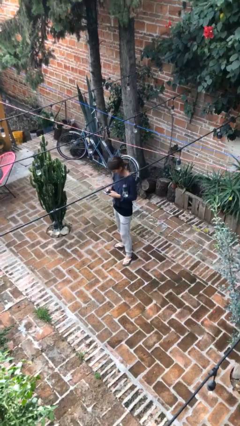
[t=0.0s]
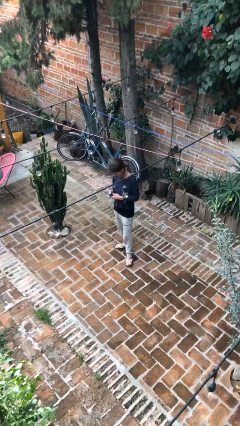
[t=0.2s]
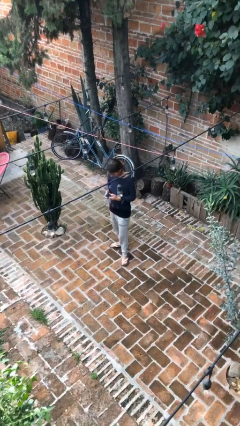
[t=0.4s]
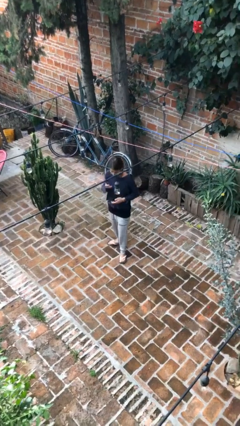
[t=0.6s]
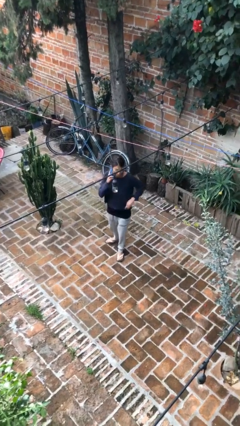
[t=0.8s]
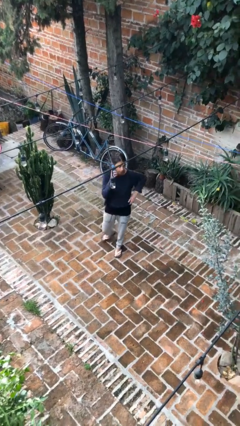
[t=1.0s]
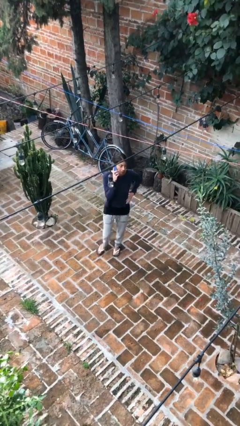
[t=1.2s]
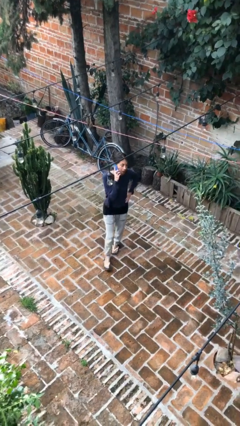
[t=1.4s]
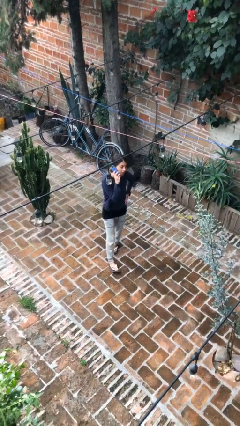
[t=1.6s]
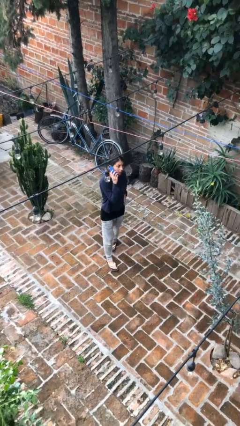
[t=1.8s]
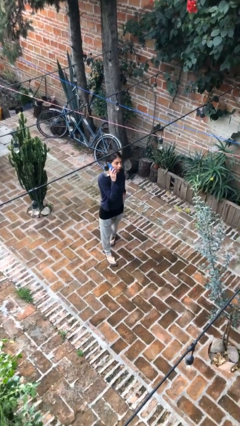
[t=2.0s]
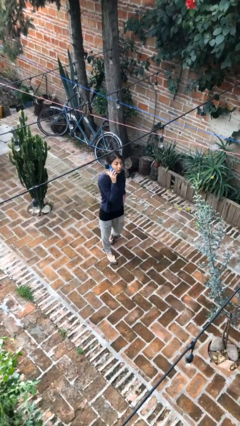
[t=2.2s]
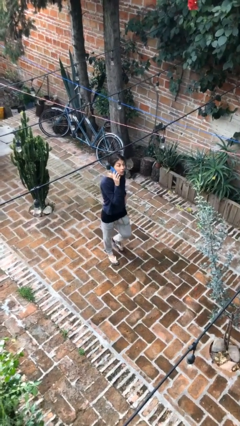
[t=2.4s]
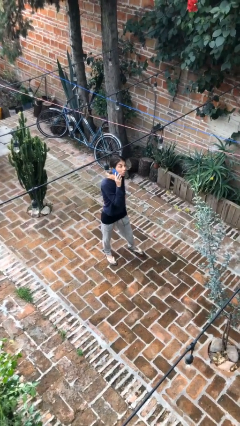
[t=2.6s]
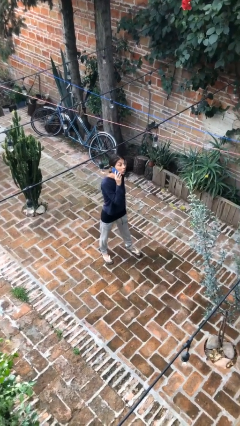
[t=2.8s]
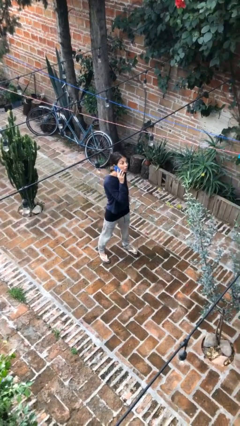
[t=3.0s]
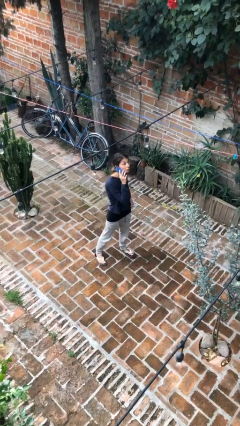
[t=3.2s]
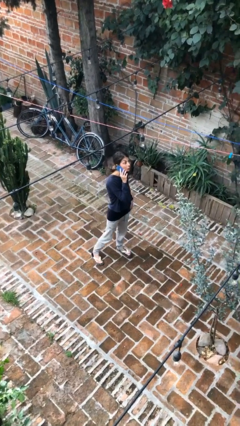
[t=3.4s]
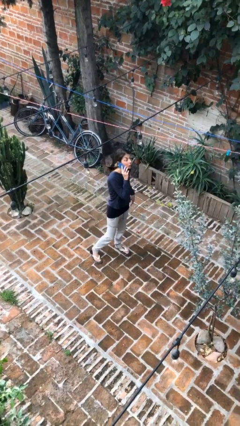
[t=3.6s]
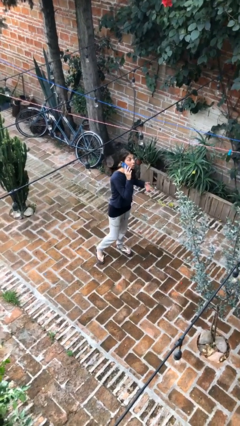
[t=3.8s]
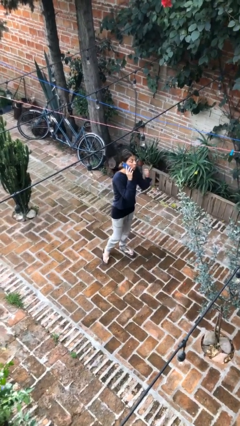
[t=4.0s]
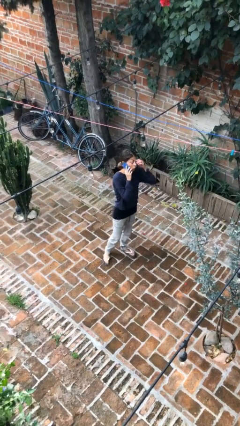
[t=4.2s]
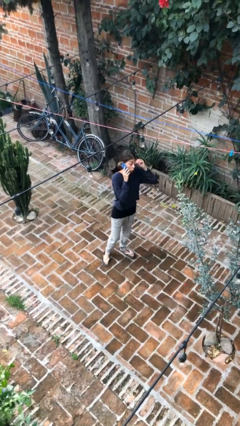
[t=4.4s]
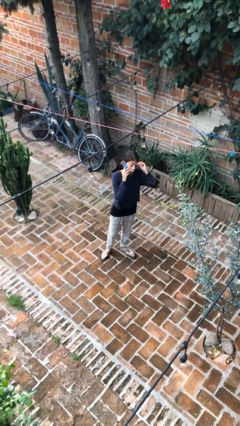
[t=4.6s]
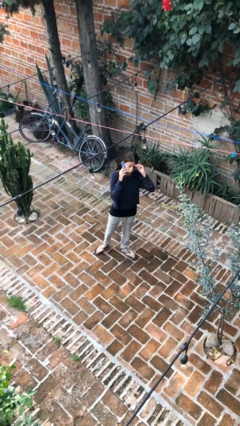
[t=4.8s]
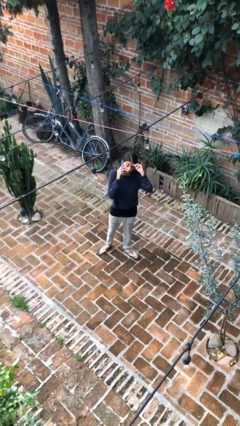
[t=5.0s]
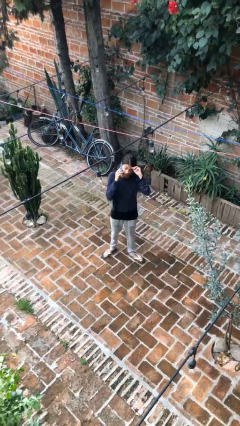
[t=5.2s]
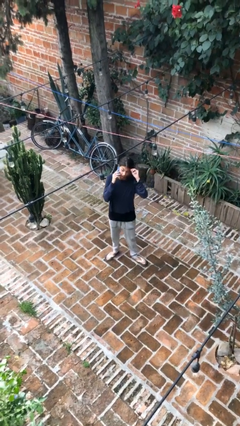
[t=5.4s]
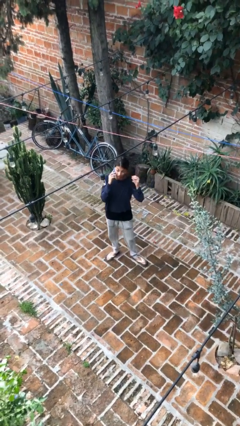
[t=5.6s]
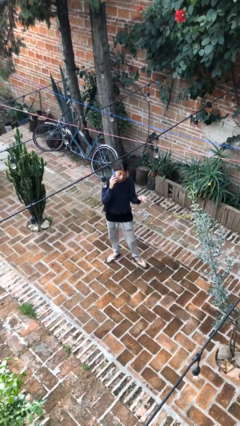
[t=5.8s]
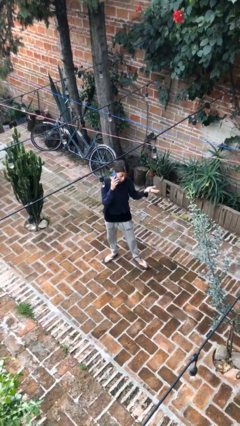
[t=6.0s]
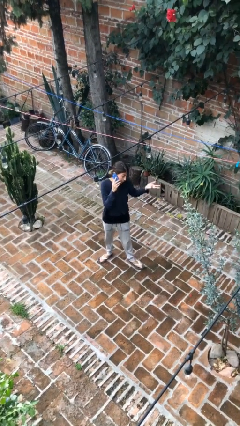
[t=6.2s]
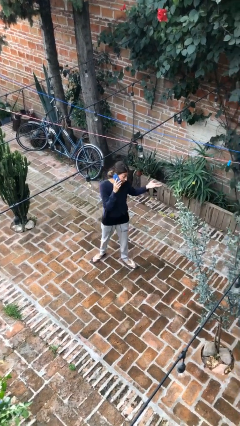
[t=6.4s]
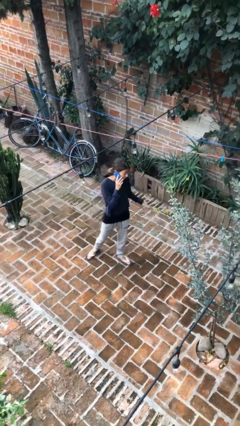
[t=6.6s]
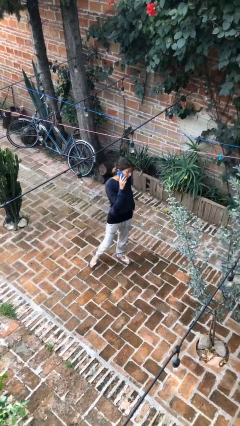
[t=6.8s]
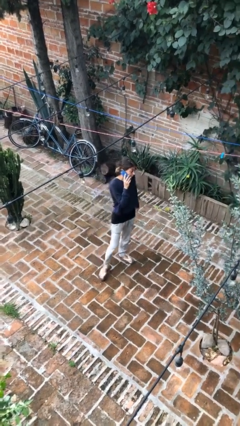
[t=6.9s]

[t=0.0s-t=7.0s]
person talks on phone

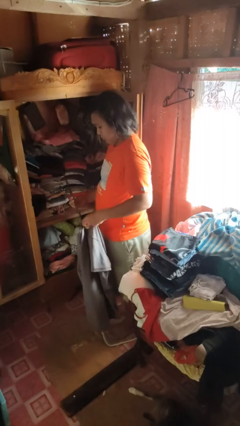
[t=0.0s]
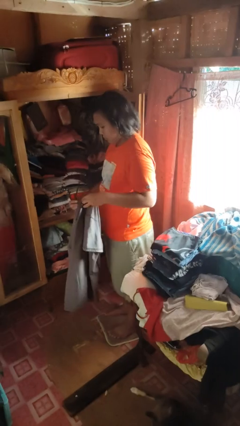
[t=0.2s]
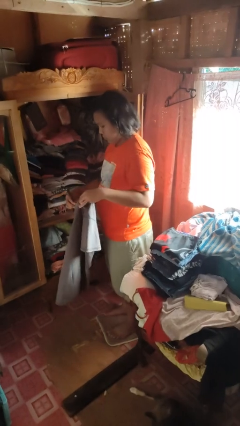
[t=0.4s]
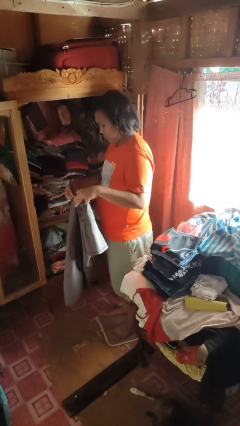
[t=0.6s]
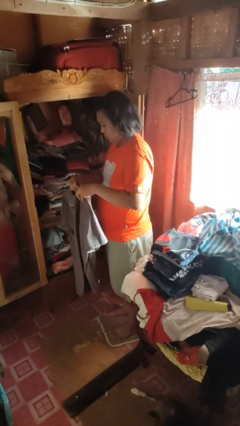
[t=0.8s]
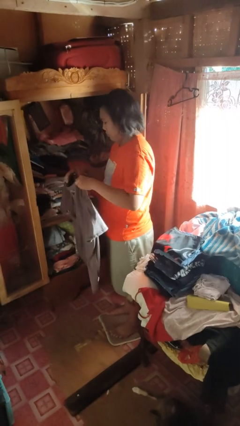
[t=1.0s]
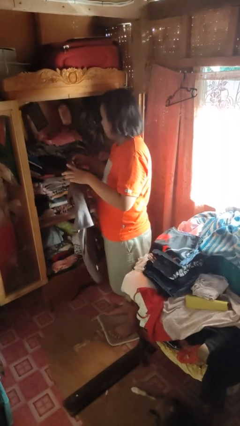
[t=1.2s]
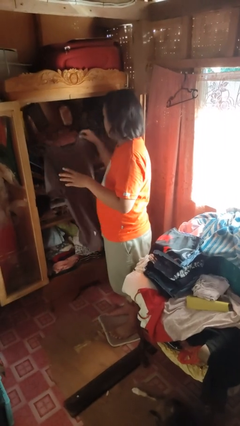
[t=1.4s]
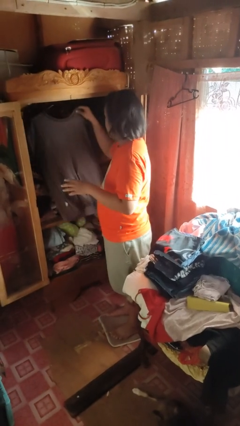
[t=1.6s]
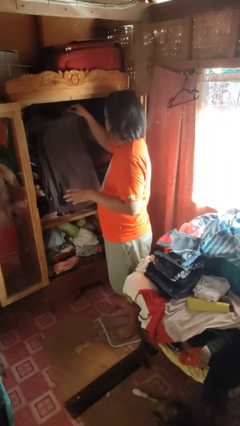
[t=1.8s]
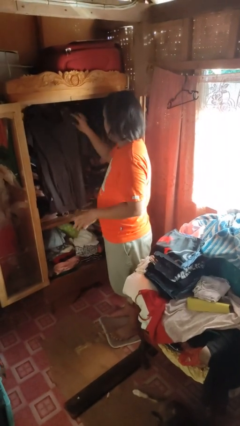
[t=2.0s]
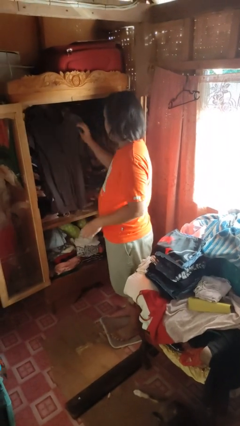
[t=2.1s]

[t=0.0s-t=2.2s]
person puts clothes into closet

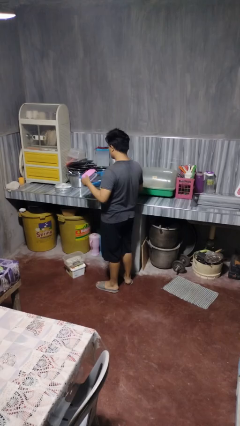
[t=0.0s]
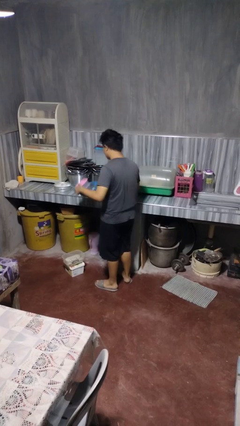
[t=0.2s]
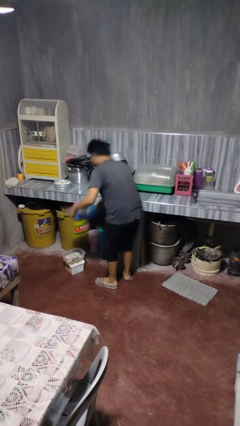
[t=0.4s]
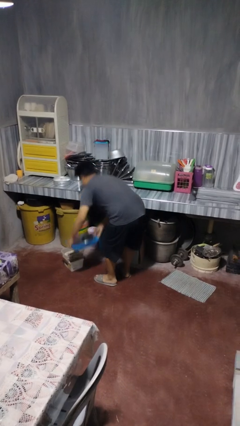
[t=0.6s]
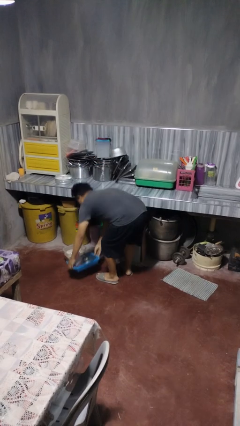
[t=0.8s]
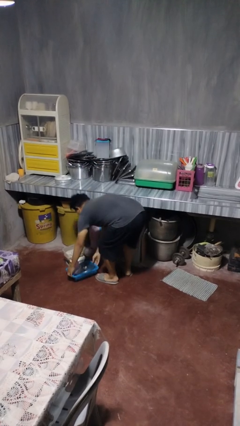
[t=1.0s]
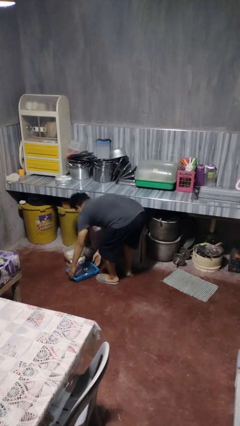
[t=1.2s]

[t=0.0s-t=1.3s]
person puts down object on countertop

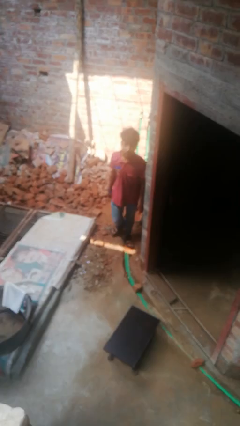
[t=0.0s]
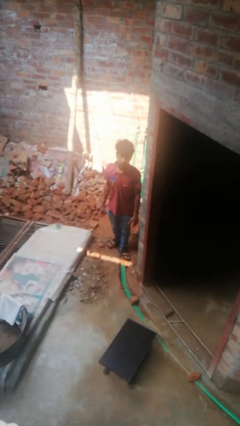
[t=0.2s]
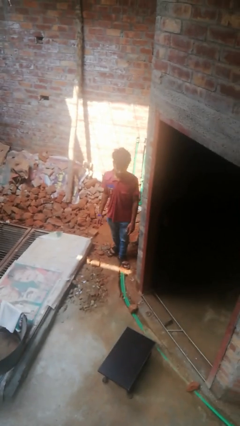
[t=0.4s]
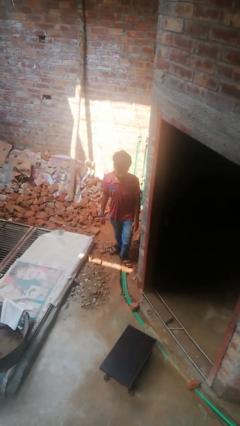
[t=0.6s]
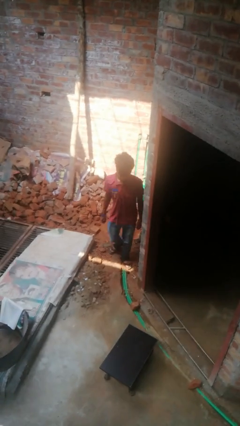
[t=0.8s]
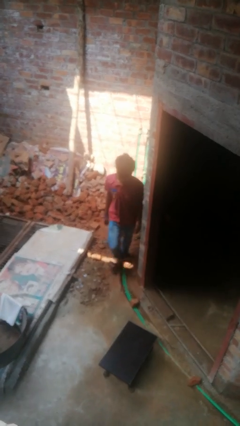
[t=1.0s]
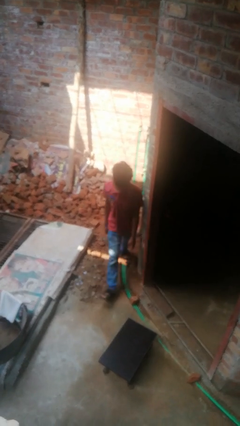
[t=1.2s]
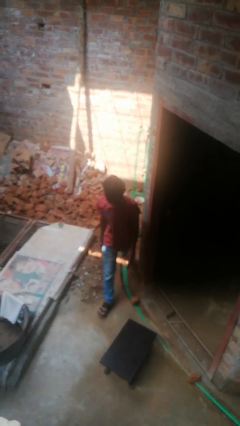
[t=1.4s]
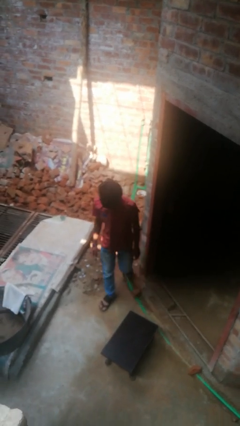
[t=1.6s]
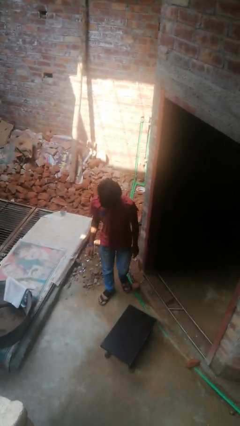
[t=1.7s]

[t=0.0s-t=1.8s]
person trips on object on floor

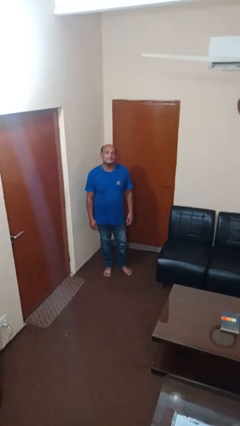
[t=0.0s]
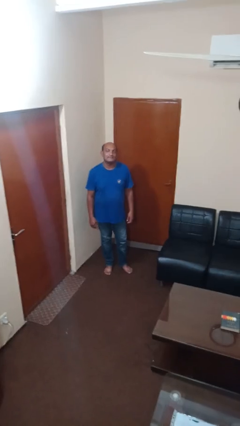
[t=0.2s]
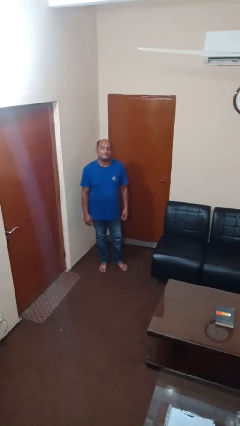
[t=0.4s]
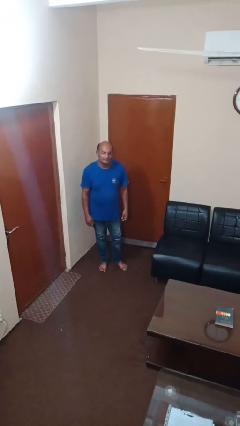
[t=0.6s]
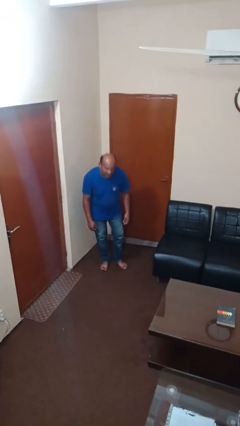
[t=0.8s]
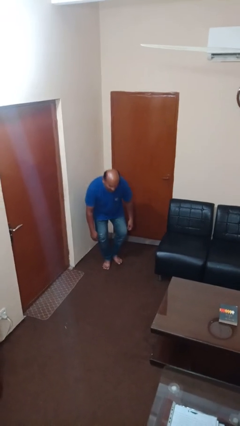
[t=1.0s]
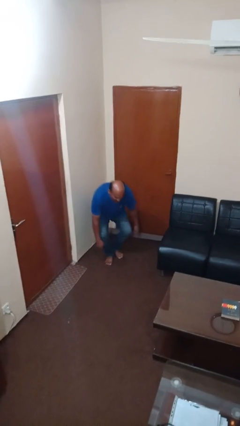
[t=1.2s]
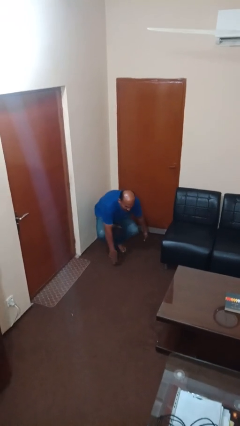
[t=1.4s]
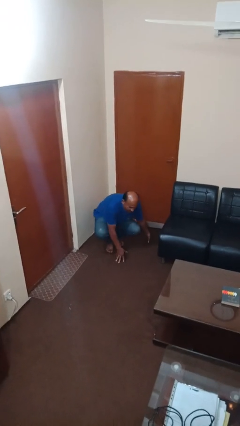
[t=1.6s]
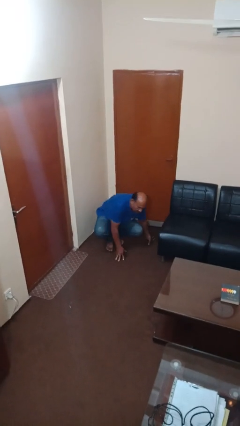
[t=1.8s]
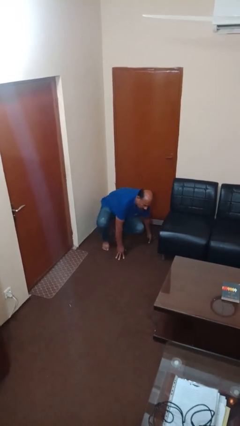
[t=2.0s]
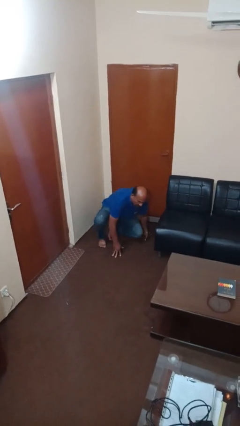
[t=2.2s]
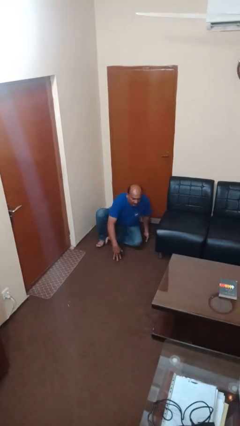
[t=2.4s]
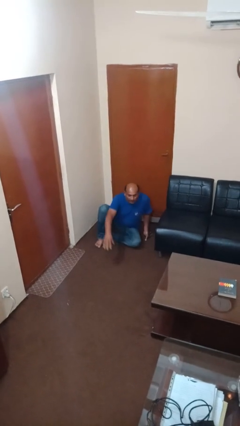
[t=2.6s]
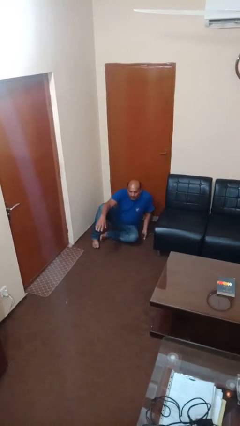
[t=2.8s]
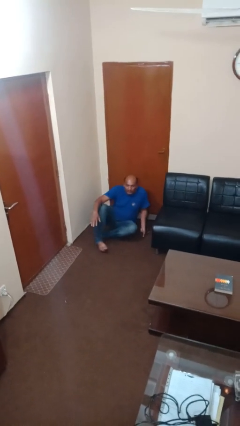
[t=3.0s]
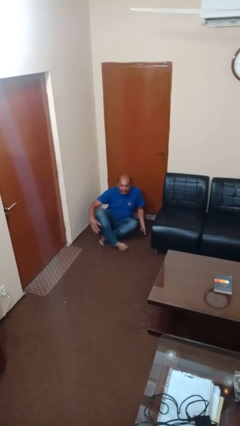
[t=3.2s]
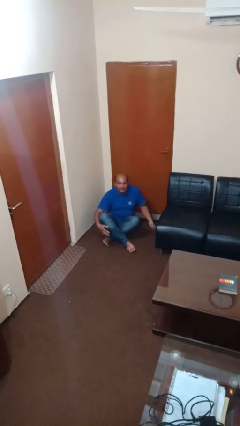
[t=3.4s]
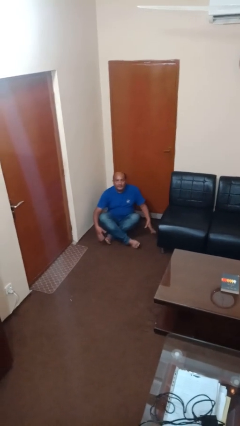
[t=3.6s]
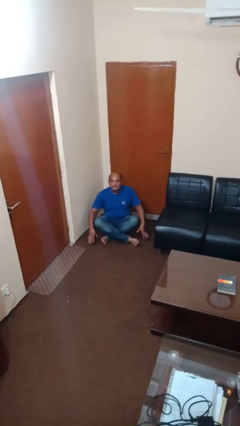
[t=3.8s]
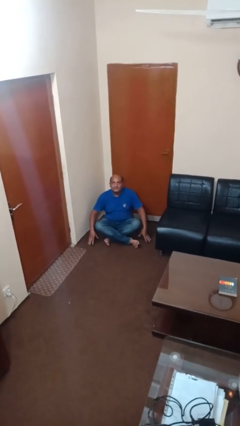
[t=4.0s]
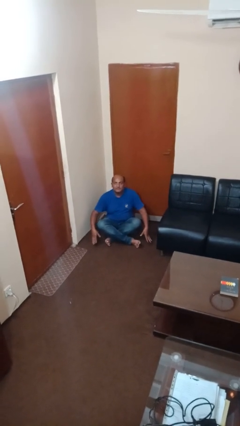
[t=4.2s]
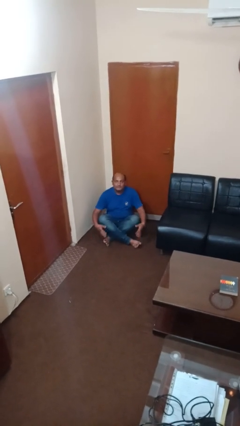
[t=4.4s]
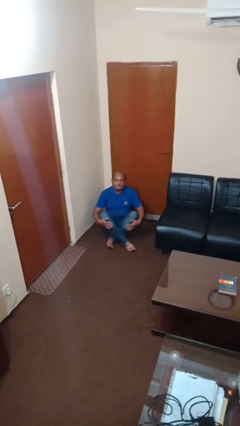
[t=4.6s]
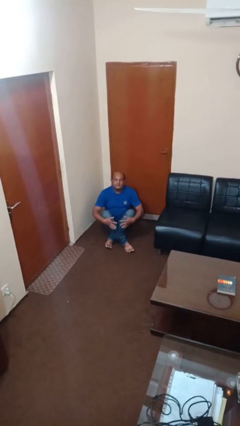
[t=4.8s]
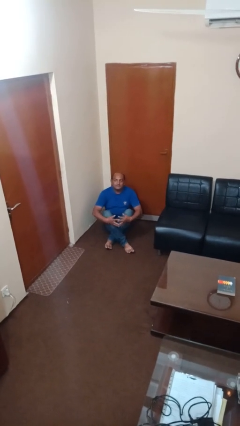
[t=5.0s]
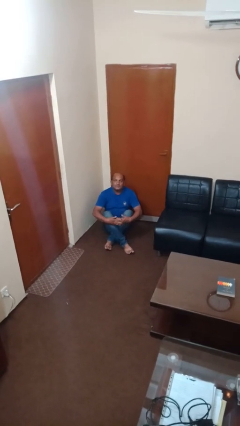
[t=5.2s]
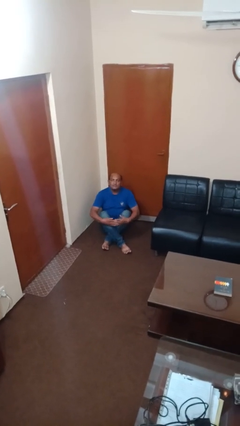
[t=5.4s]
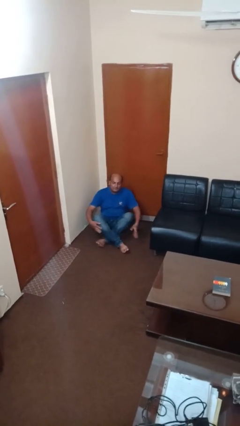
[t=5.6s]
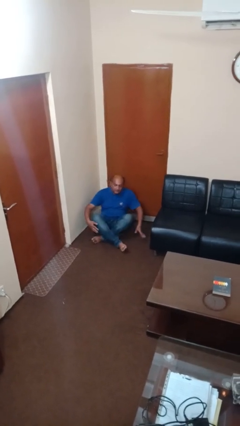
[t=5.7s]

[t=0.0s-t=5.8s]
person sits crisscross
